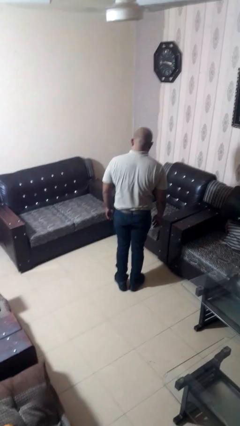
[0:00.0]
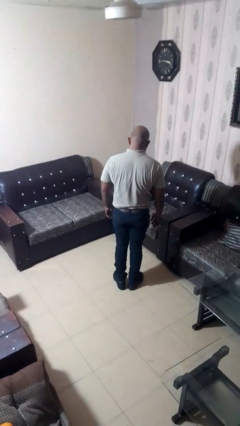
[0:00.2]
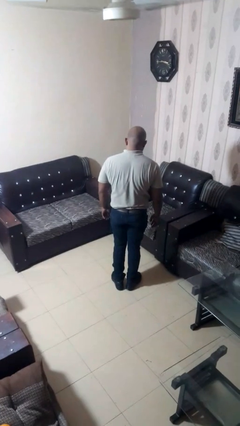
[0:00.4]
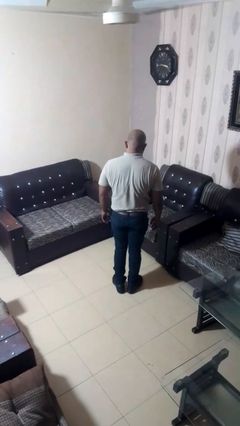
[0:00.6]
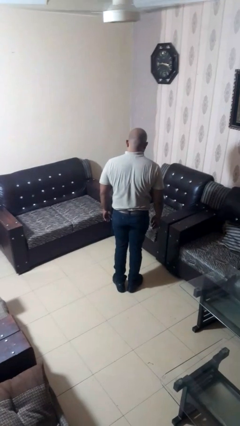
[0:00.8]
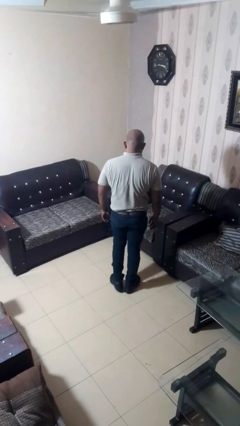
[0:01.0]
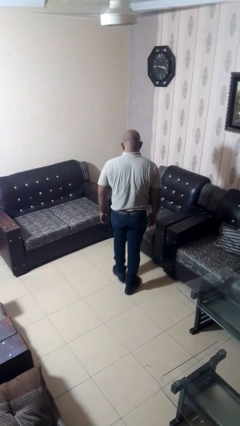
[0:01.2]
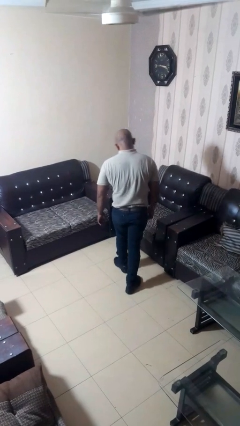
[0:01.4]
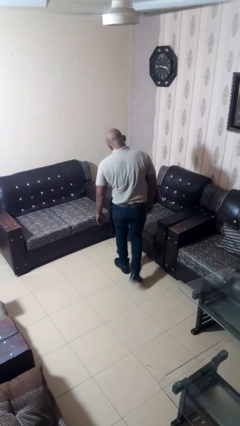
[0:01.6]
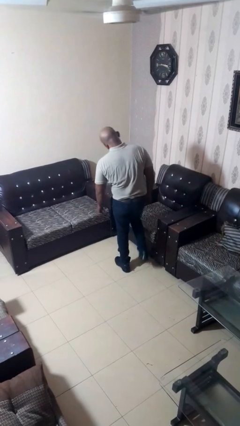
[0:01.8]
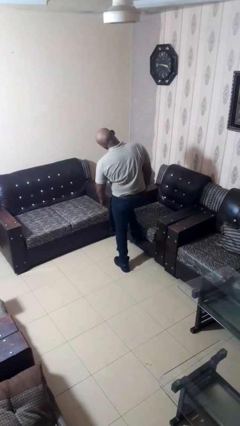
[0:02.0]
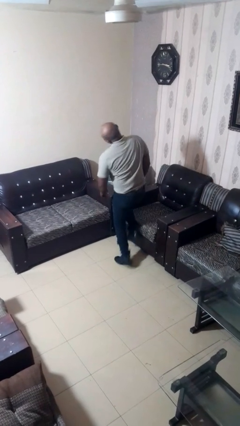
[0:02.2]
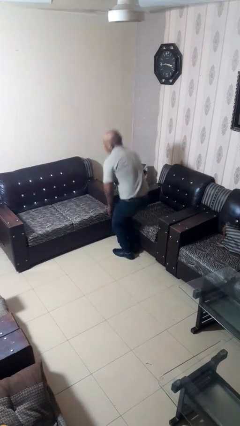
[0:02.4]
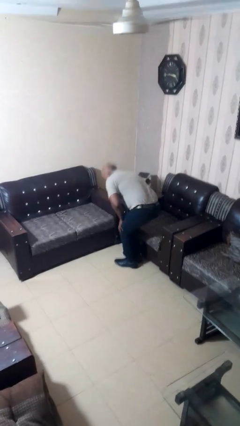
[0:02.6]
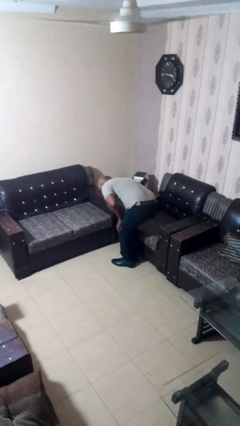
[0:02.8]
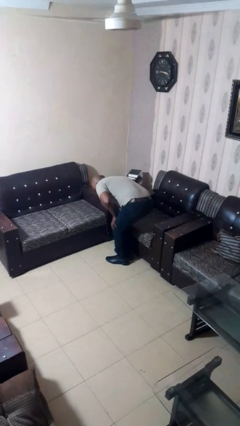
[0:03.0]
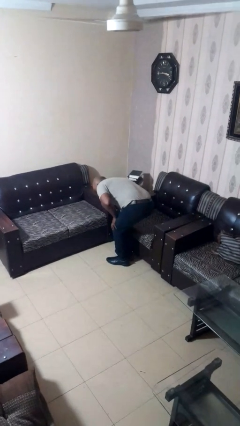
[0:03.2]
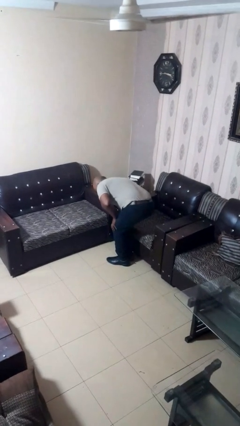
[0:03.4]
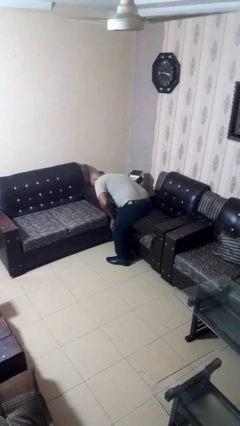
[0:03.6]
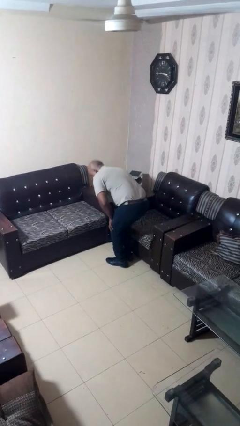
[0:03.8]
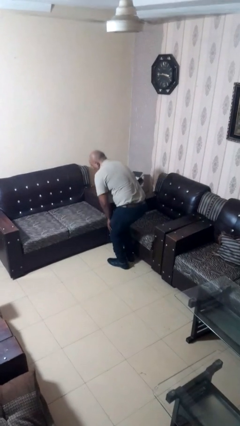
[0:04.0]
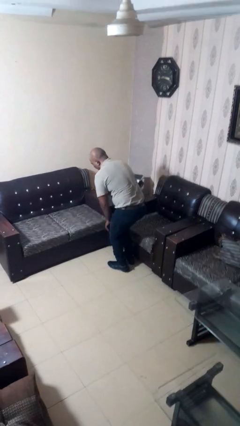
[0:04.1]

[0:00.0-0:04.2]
person stubs toe

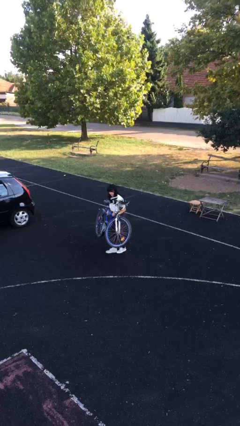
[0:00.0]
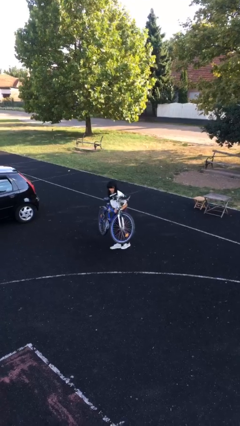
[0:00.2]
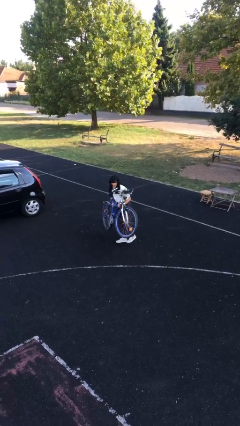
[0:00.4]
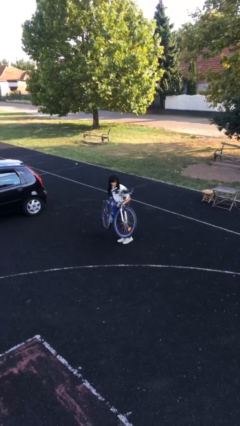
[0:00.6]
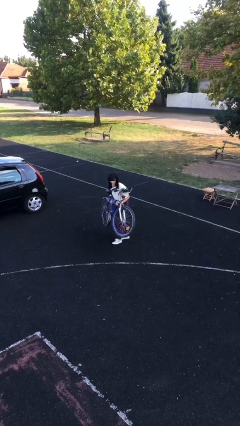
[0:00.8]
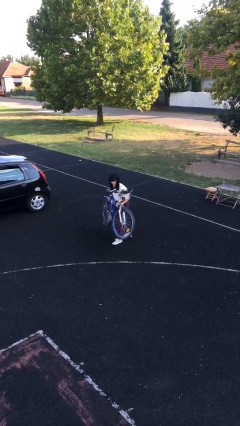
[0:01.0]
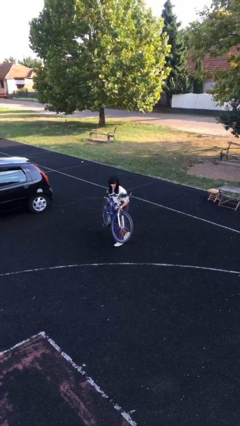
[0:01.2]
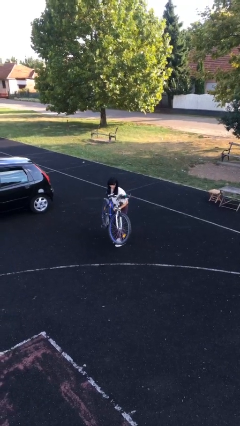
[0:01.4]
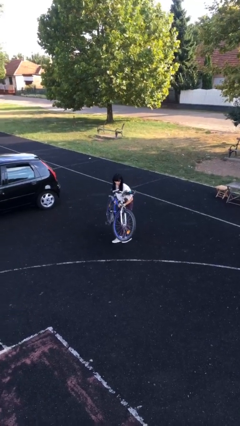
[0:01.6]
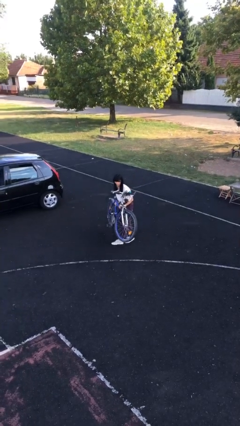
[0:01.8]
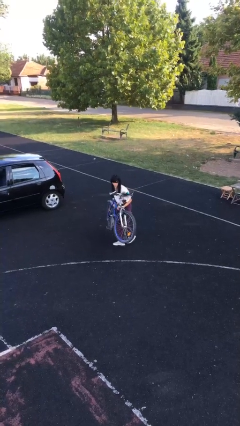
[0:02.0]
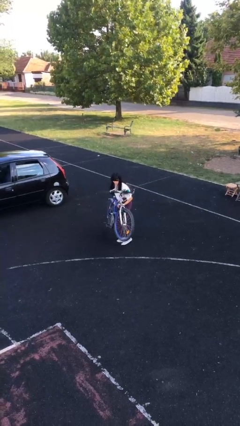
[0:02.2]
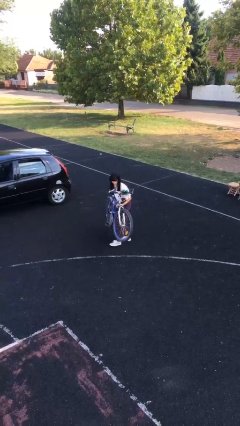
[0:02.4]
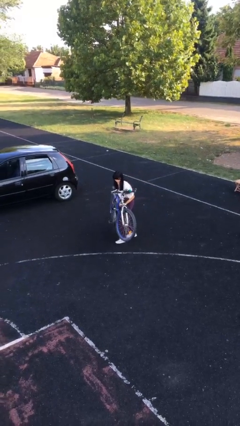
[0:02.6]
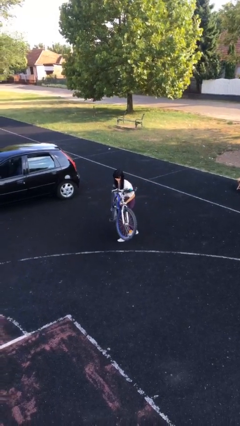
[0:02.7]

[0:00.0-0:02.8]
person carries heavy object

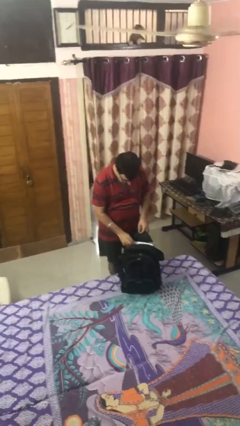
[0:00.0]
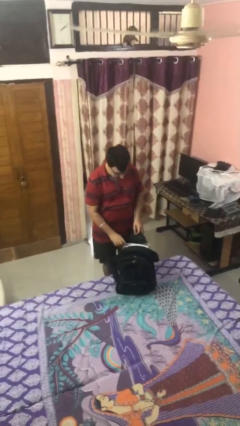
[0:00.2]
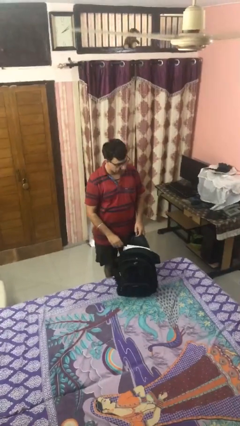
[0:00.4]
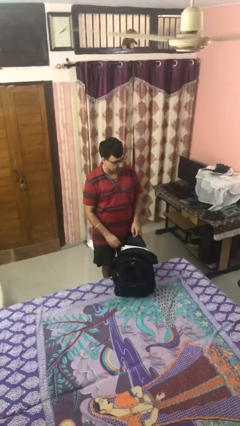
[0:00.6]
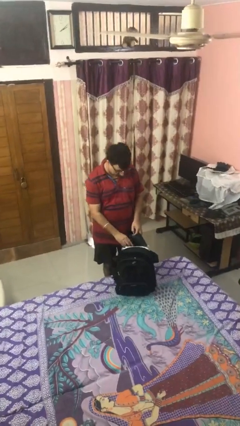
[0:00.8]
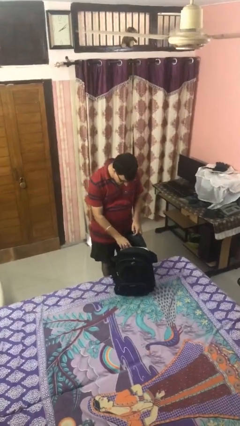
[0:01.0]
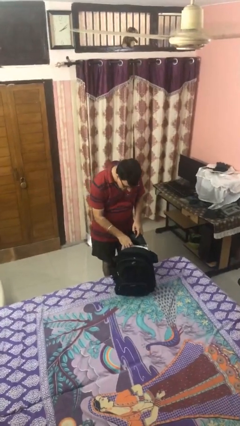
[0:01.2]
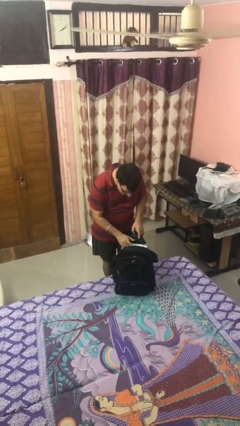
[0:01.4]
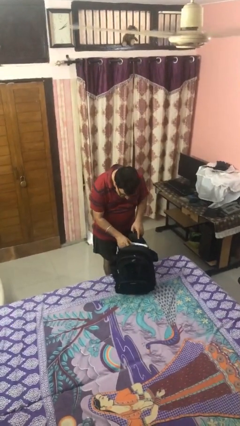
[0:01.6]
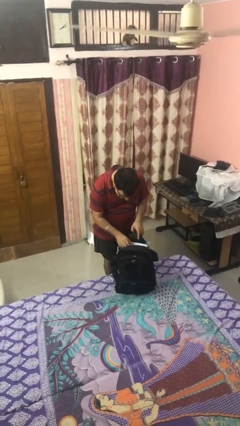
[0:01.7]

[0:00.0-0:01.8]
person searches in backpack

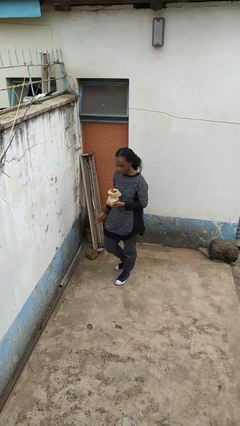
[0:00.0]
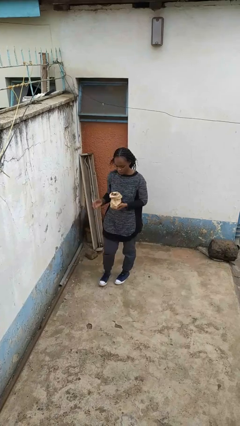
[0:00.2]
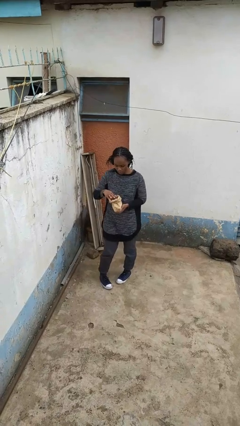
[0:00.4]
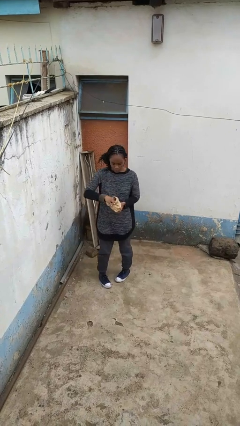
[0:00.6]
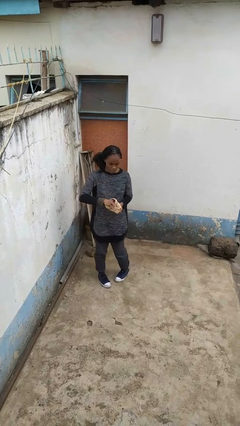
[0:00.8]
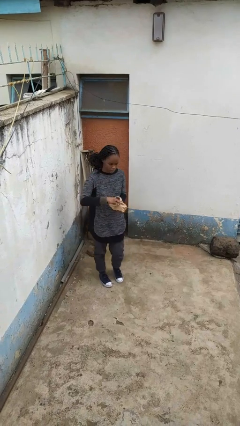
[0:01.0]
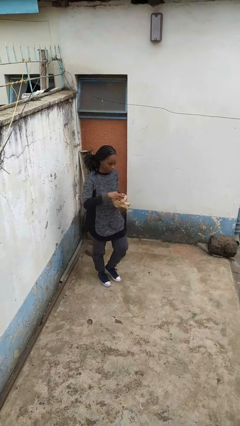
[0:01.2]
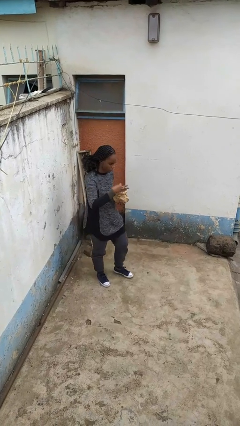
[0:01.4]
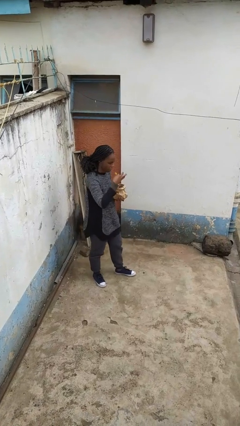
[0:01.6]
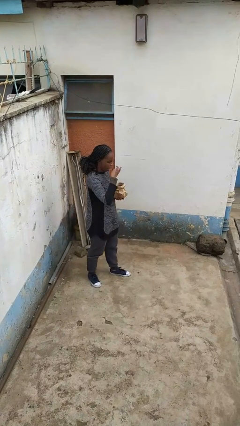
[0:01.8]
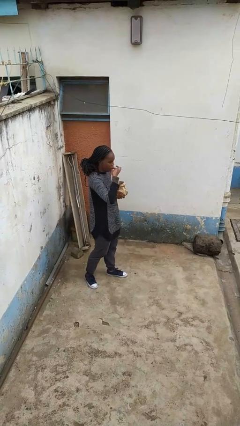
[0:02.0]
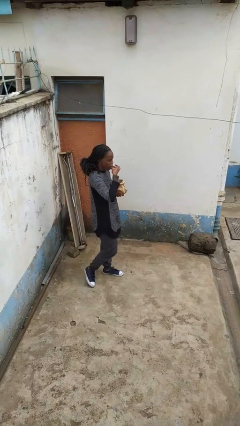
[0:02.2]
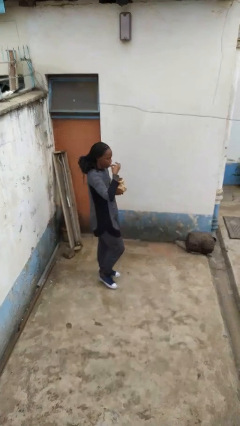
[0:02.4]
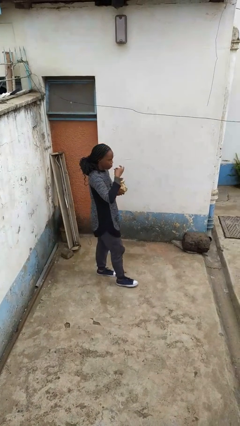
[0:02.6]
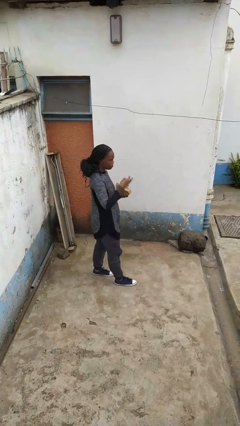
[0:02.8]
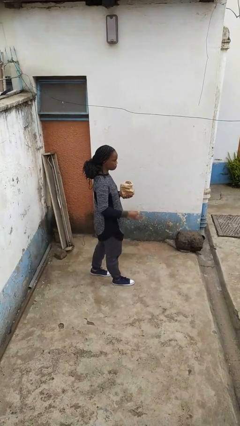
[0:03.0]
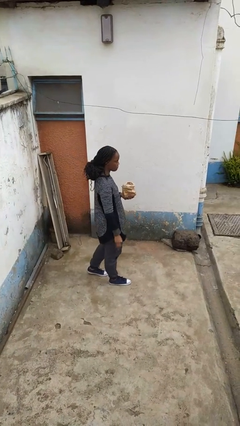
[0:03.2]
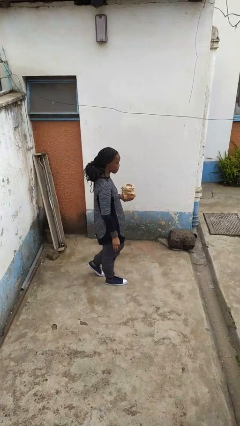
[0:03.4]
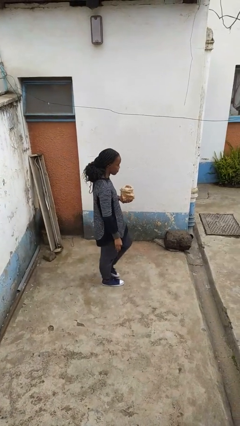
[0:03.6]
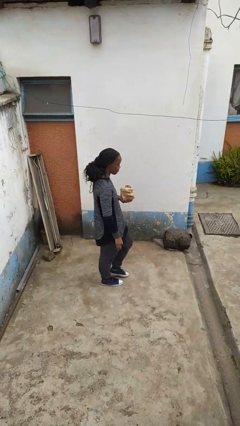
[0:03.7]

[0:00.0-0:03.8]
person eats snack from bag

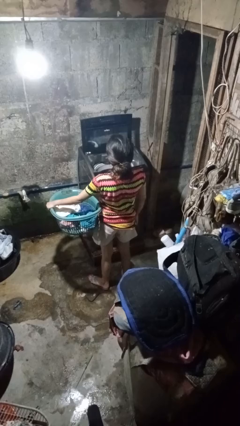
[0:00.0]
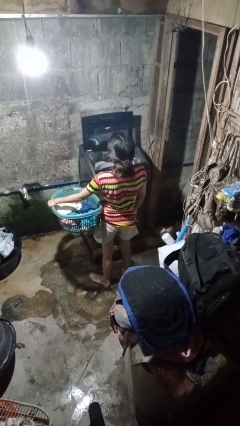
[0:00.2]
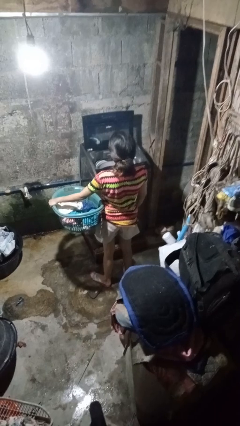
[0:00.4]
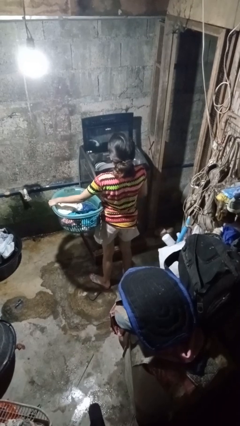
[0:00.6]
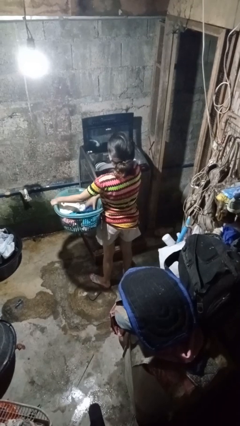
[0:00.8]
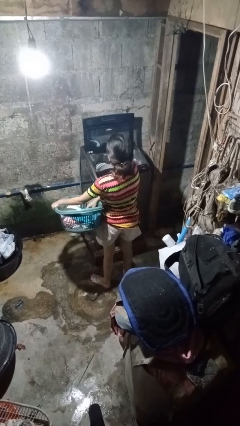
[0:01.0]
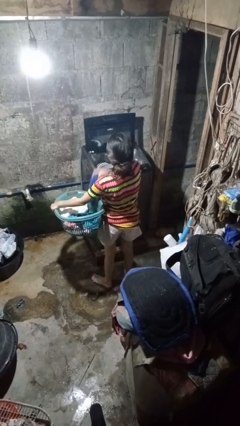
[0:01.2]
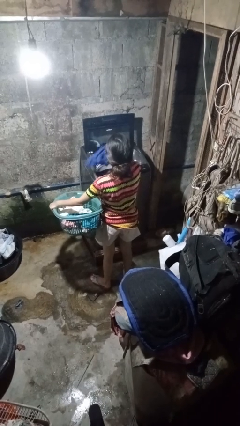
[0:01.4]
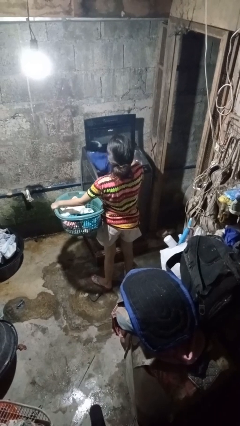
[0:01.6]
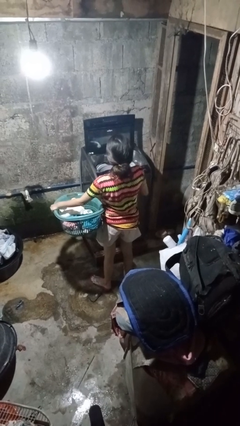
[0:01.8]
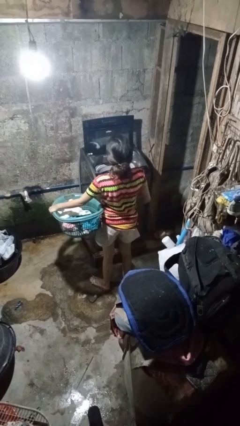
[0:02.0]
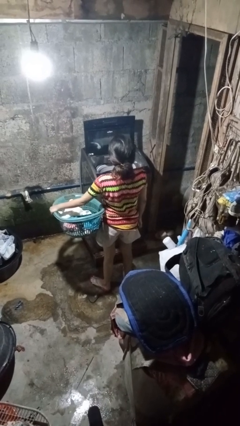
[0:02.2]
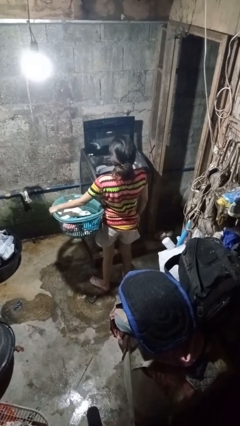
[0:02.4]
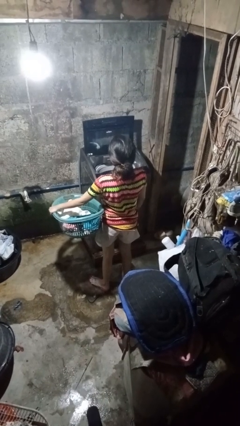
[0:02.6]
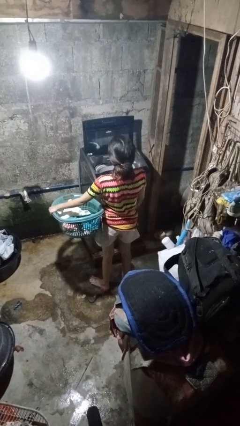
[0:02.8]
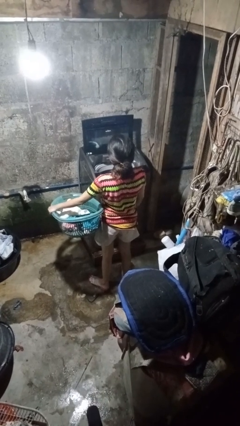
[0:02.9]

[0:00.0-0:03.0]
person loads clotheswasher

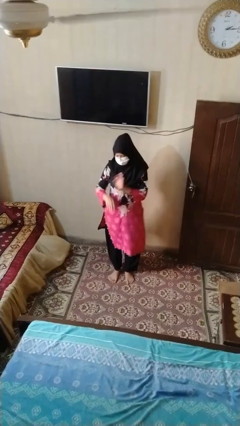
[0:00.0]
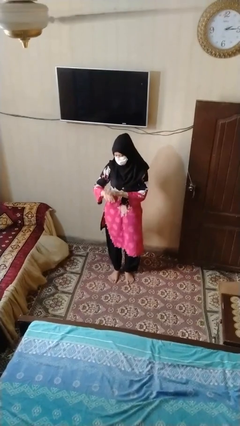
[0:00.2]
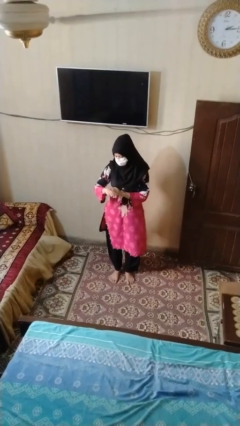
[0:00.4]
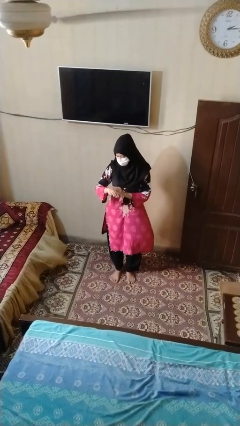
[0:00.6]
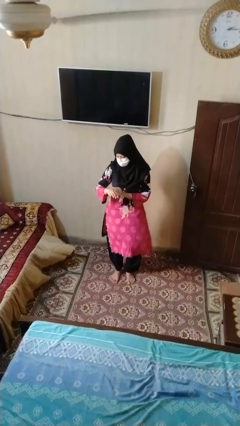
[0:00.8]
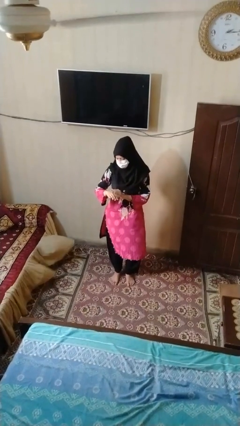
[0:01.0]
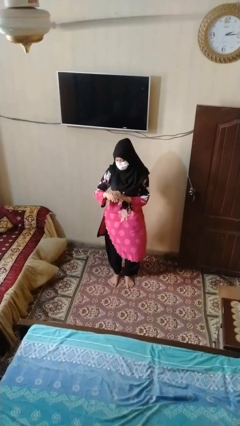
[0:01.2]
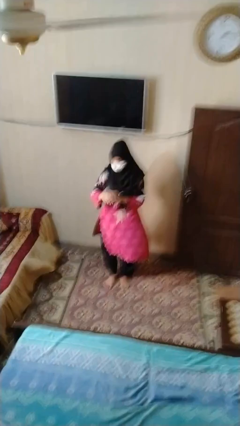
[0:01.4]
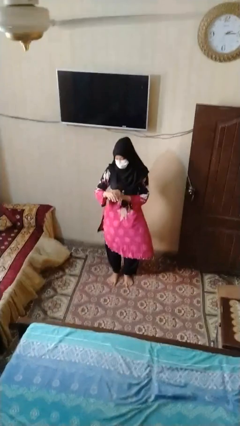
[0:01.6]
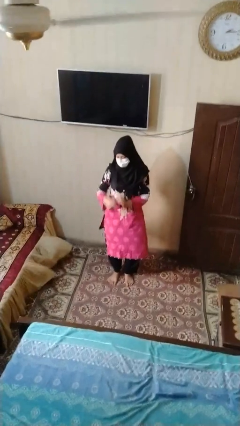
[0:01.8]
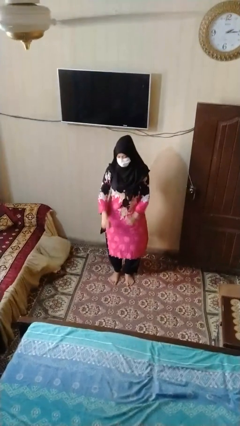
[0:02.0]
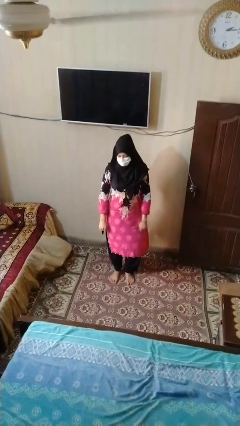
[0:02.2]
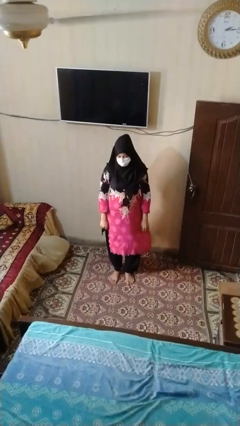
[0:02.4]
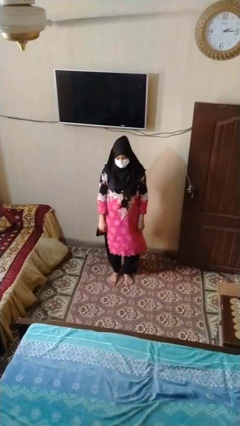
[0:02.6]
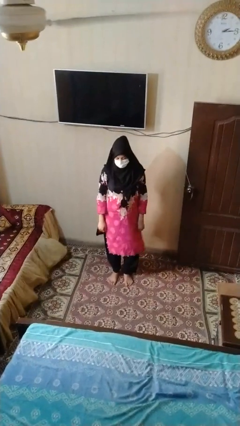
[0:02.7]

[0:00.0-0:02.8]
person closes jewelry box
